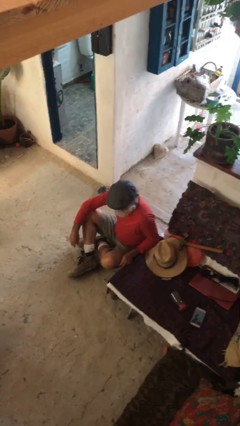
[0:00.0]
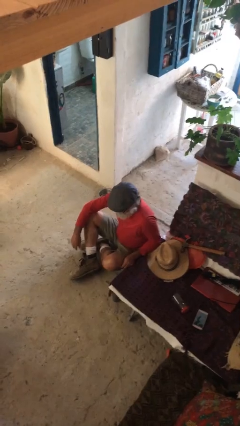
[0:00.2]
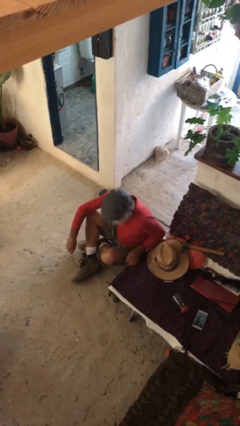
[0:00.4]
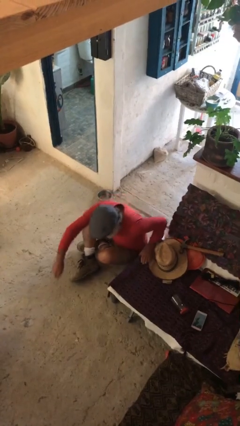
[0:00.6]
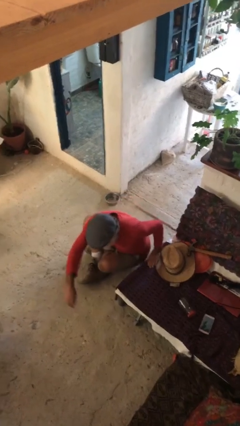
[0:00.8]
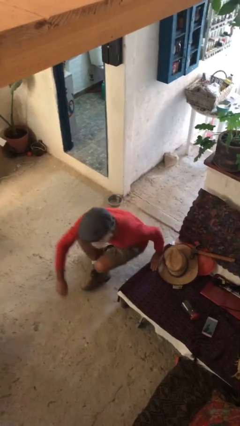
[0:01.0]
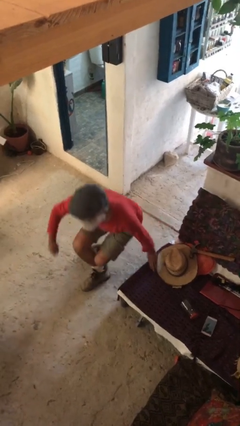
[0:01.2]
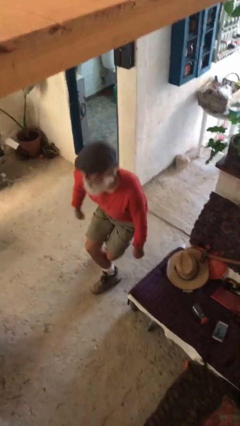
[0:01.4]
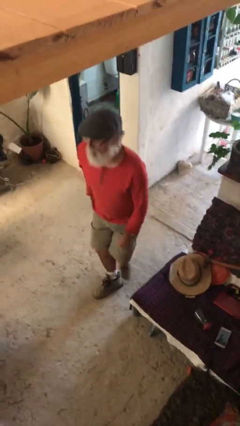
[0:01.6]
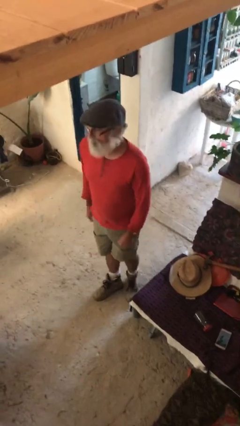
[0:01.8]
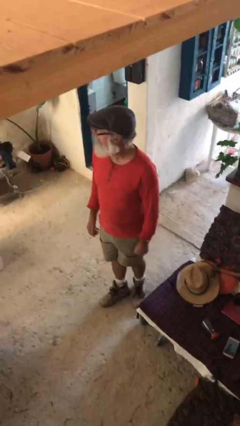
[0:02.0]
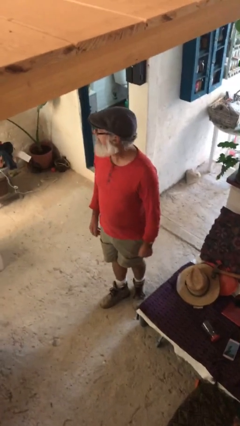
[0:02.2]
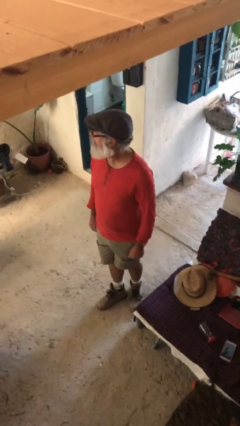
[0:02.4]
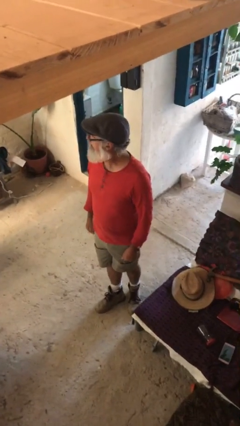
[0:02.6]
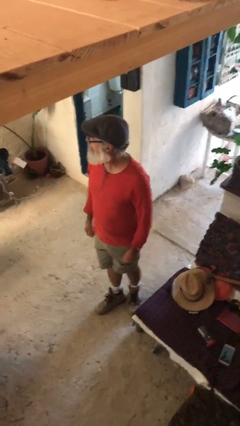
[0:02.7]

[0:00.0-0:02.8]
person stands up

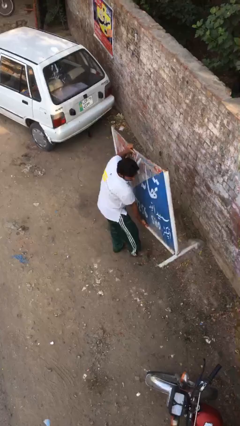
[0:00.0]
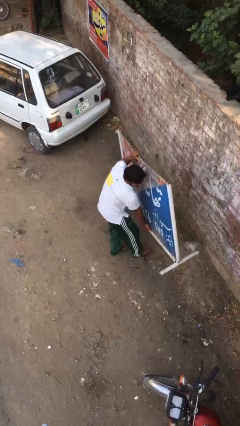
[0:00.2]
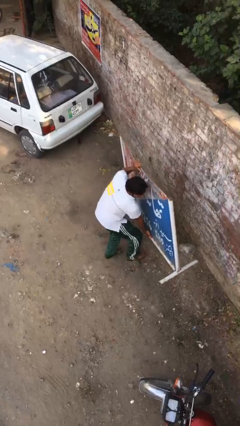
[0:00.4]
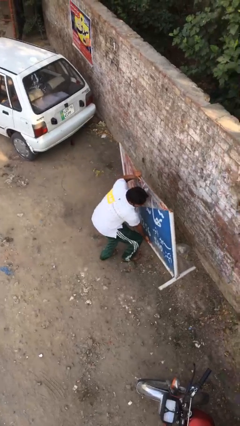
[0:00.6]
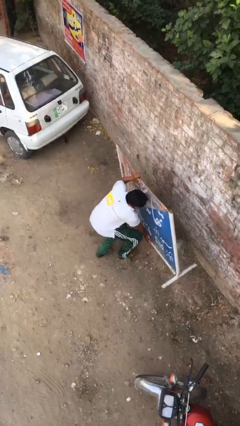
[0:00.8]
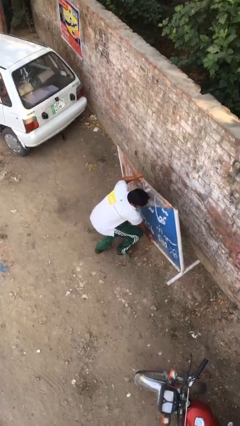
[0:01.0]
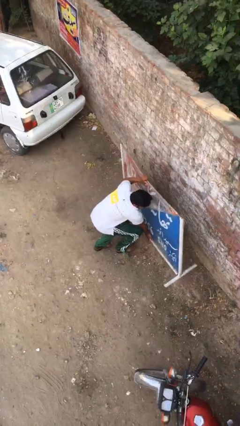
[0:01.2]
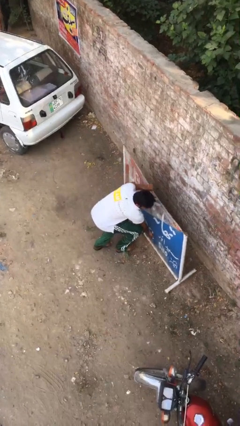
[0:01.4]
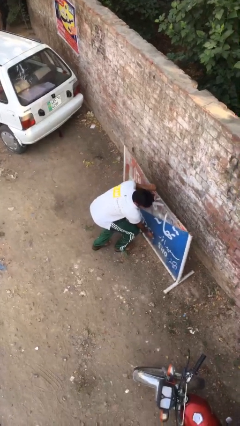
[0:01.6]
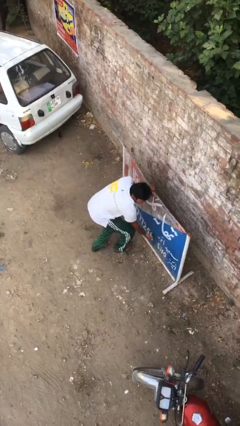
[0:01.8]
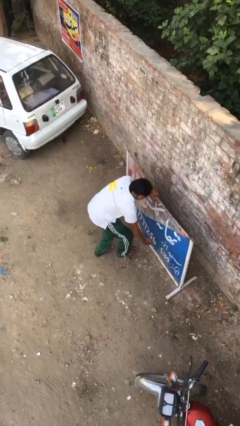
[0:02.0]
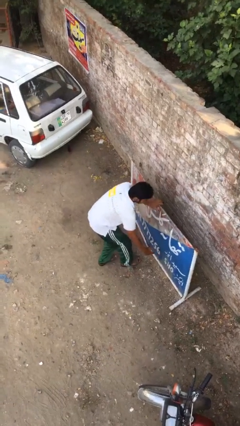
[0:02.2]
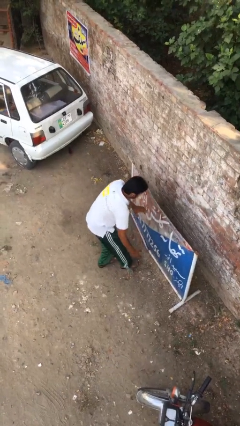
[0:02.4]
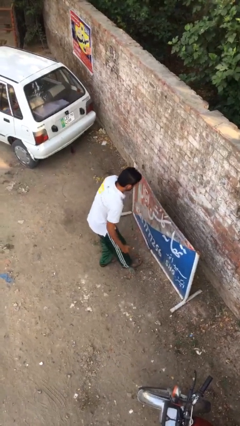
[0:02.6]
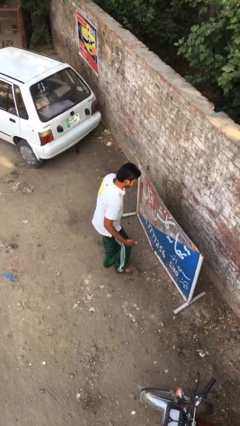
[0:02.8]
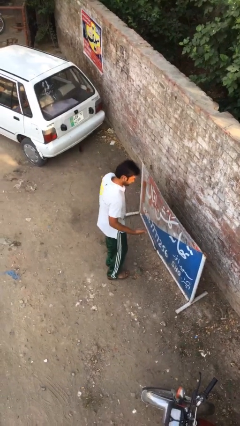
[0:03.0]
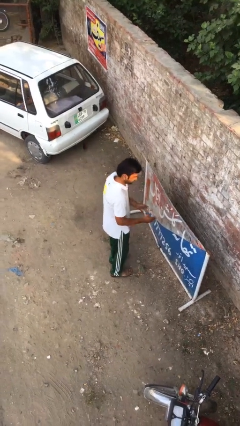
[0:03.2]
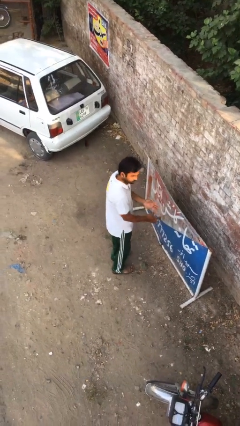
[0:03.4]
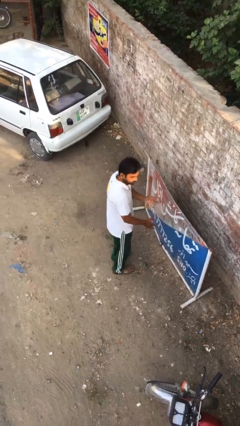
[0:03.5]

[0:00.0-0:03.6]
person puts down object on floor

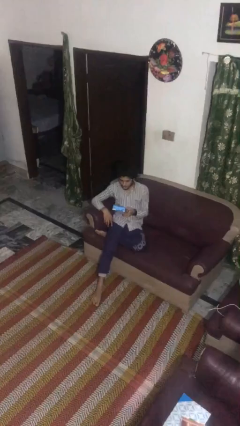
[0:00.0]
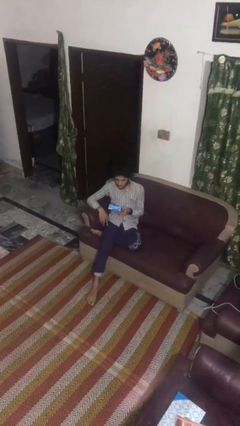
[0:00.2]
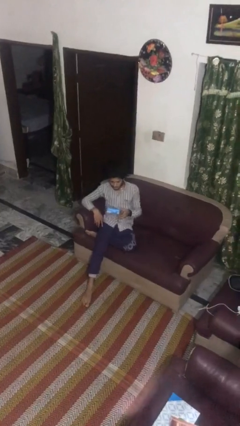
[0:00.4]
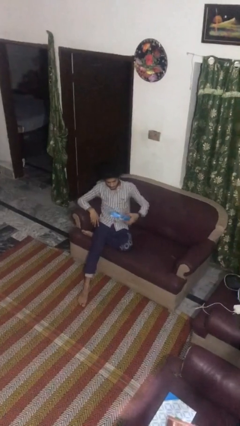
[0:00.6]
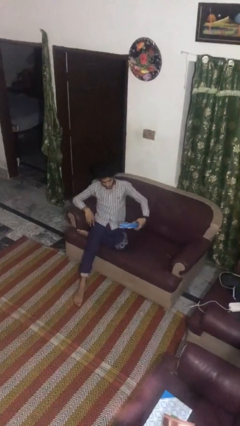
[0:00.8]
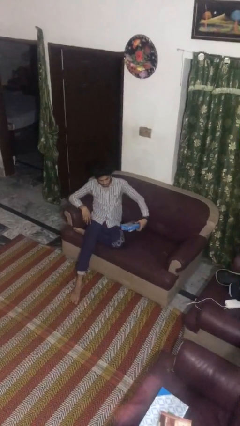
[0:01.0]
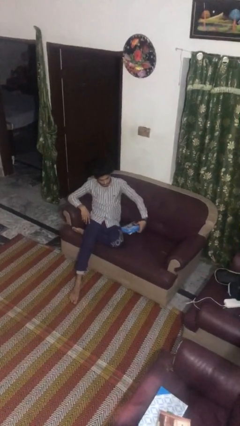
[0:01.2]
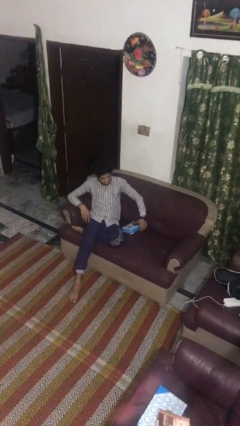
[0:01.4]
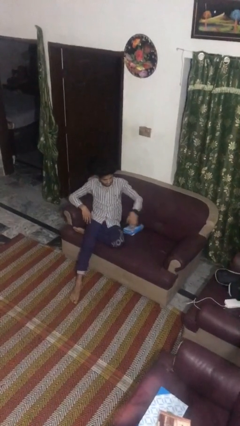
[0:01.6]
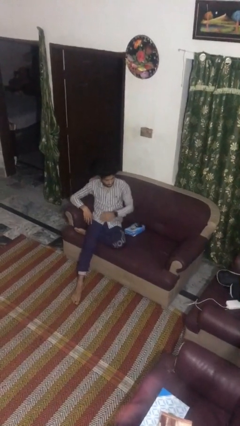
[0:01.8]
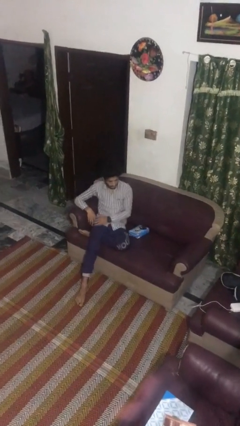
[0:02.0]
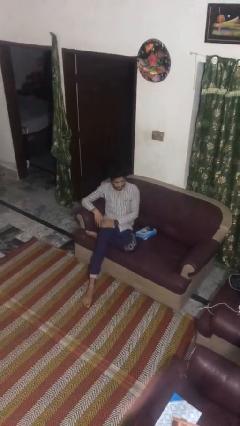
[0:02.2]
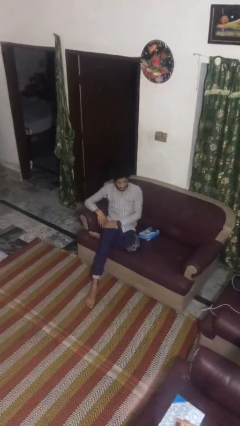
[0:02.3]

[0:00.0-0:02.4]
person puts down object on couch

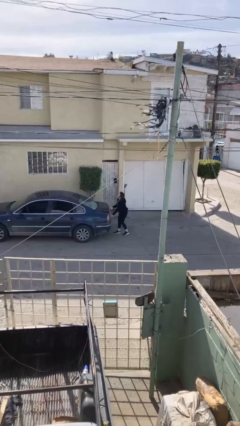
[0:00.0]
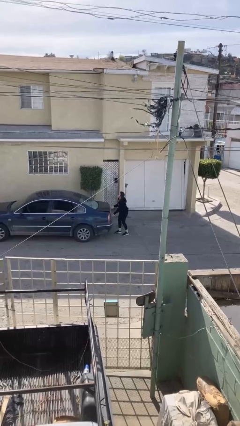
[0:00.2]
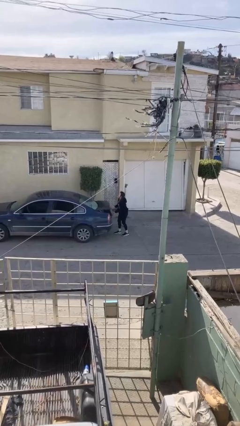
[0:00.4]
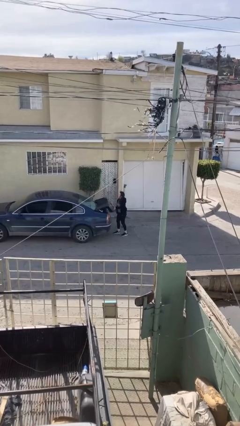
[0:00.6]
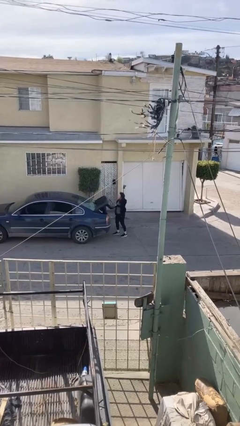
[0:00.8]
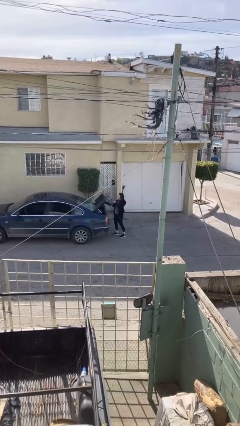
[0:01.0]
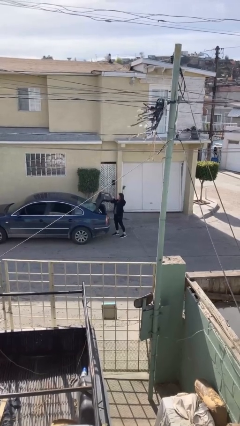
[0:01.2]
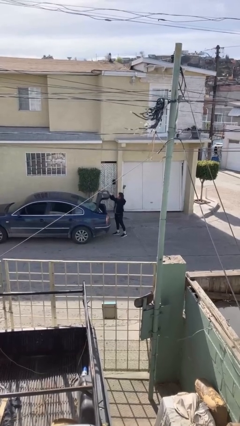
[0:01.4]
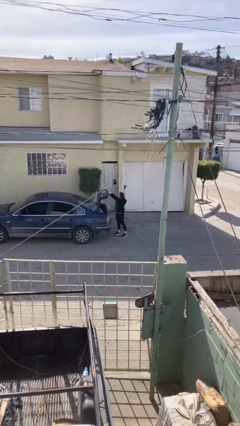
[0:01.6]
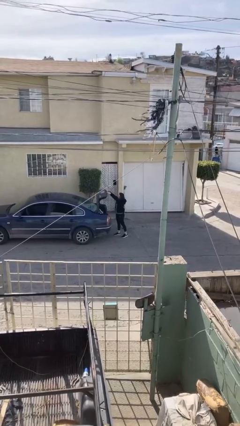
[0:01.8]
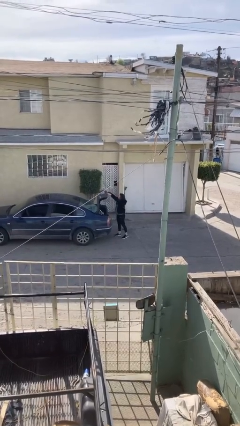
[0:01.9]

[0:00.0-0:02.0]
person opens car trunk

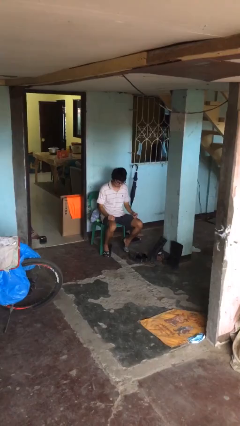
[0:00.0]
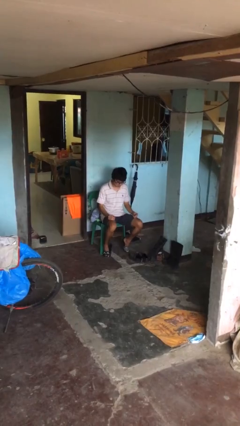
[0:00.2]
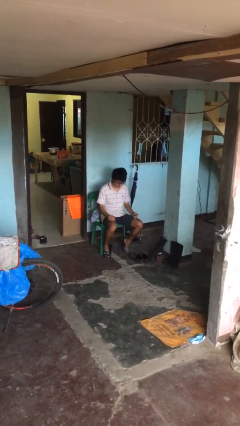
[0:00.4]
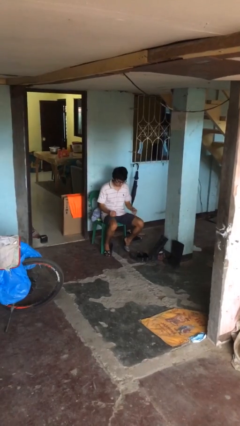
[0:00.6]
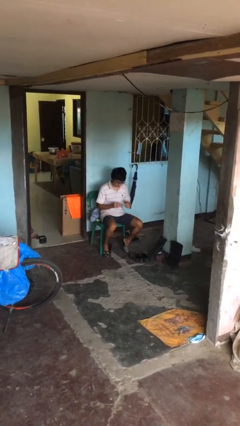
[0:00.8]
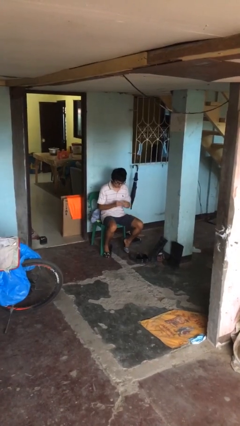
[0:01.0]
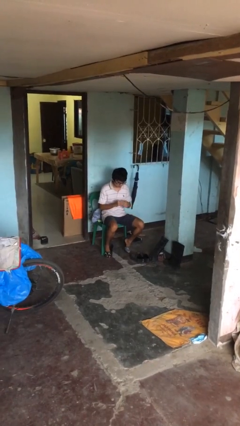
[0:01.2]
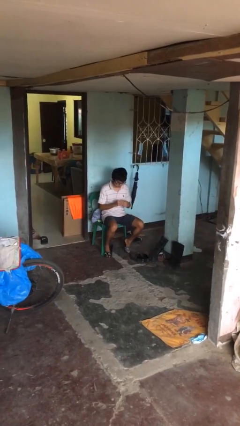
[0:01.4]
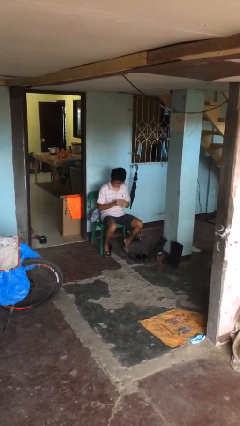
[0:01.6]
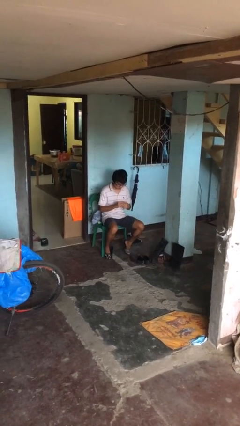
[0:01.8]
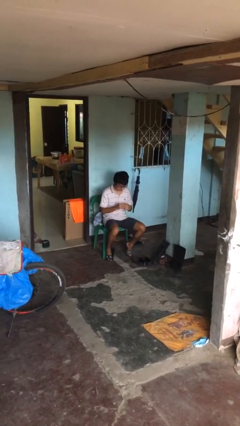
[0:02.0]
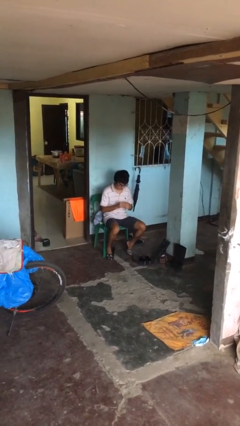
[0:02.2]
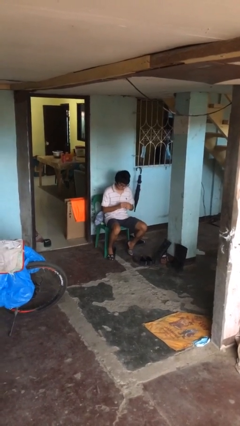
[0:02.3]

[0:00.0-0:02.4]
person puts on ring

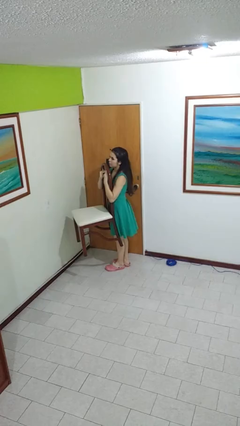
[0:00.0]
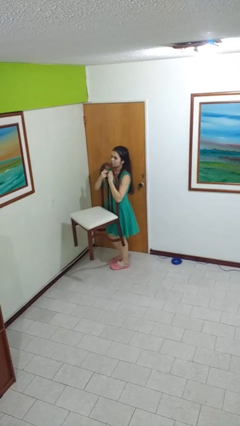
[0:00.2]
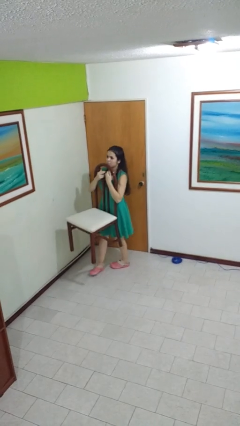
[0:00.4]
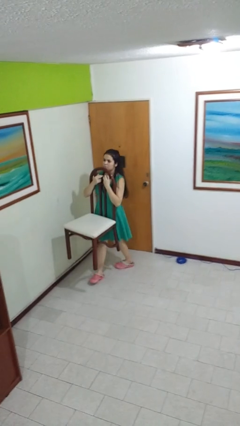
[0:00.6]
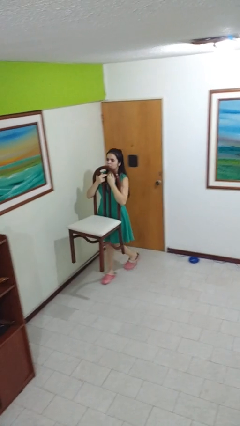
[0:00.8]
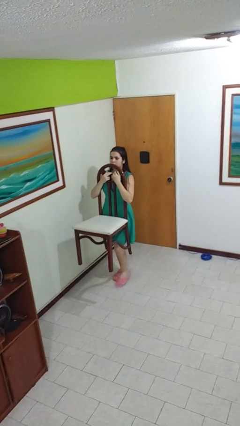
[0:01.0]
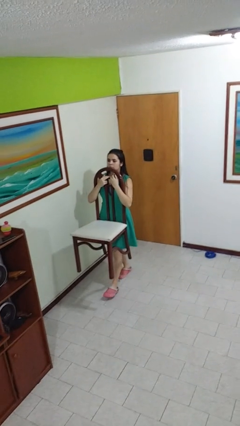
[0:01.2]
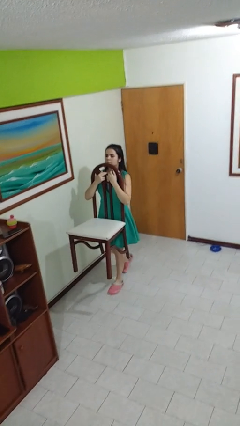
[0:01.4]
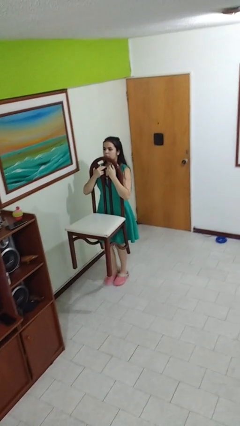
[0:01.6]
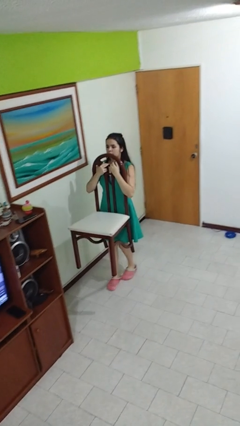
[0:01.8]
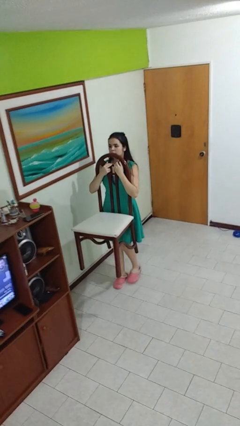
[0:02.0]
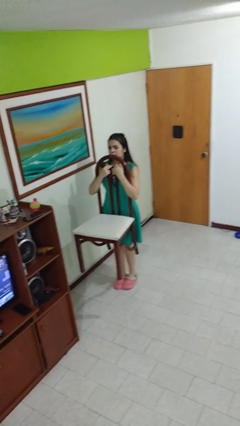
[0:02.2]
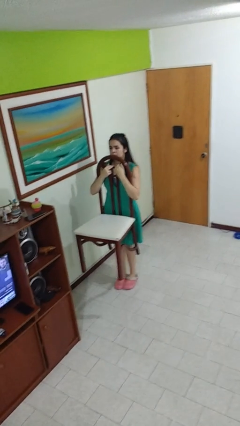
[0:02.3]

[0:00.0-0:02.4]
person carries furniture

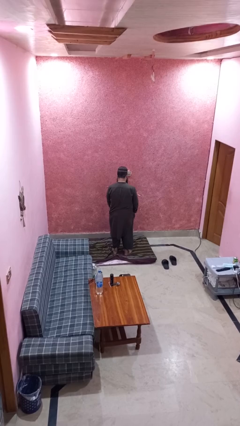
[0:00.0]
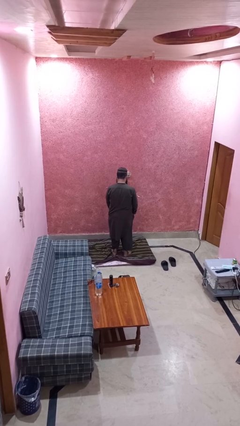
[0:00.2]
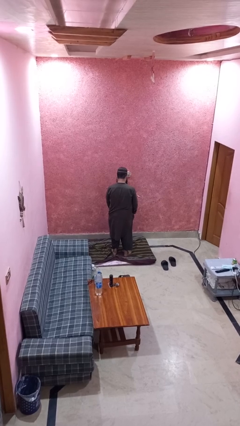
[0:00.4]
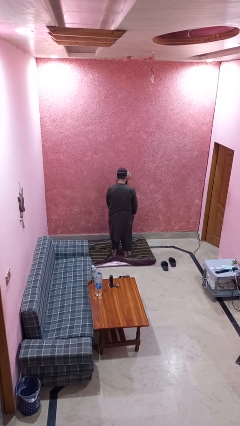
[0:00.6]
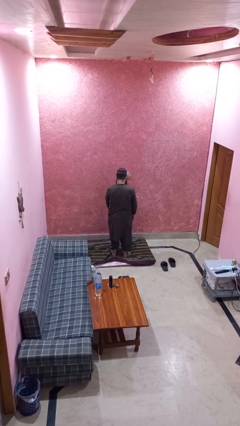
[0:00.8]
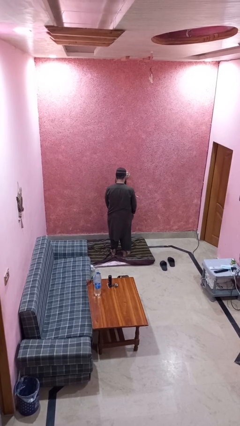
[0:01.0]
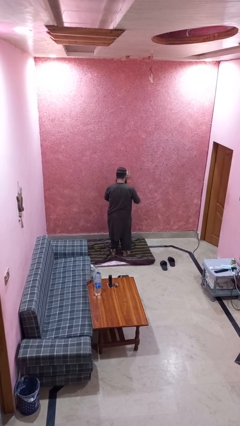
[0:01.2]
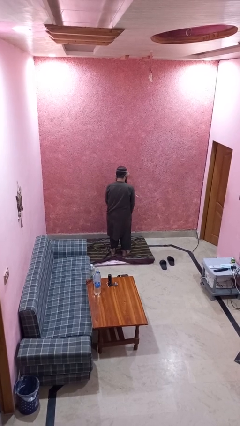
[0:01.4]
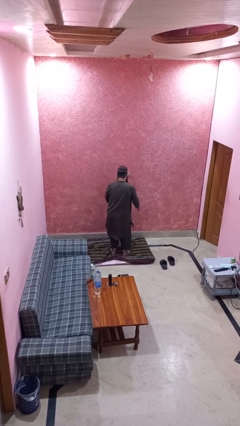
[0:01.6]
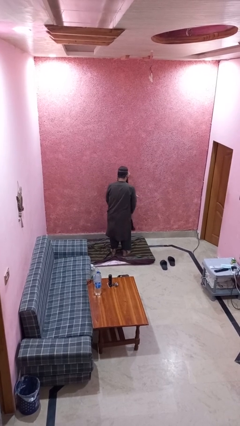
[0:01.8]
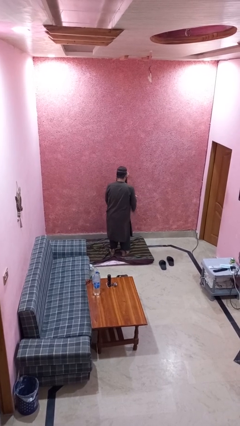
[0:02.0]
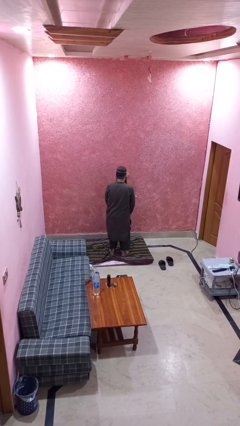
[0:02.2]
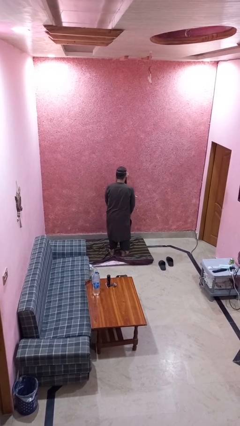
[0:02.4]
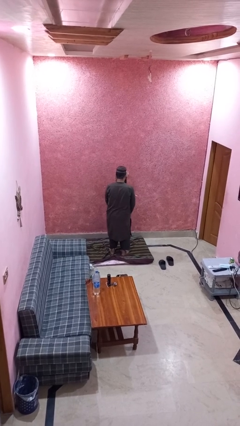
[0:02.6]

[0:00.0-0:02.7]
person slaps hands on thighs
